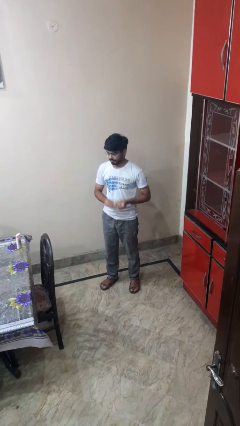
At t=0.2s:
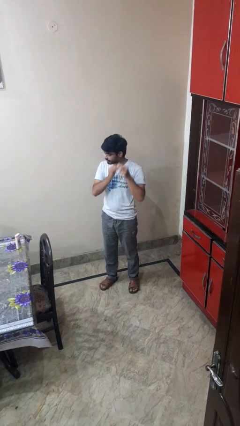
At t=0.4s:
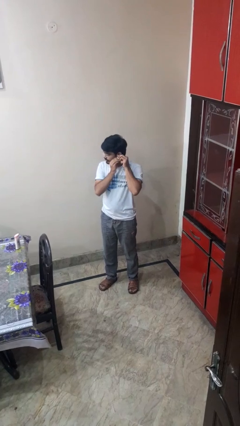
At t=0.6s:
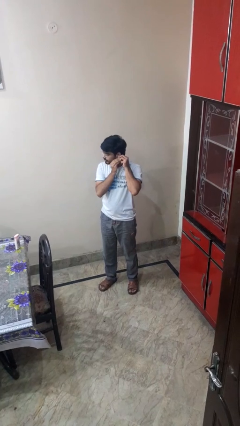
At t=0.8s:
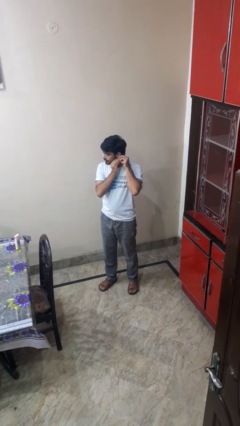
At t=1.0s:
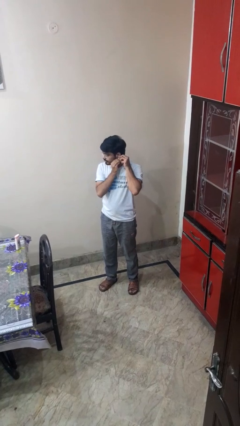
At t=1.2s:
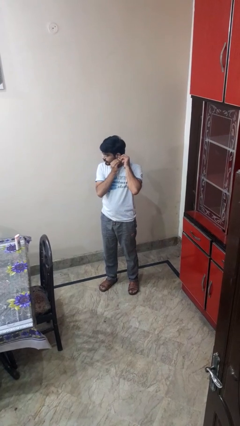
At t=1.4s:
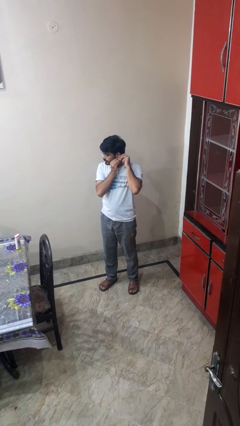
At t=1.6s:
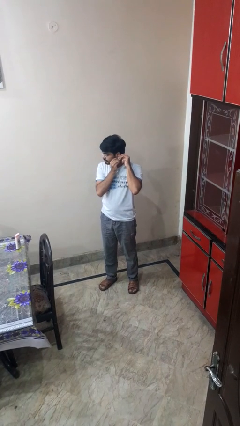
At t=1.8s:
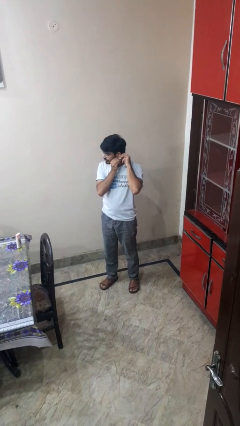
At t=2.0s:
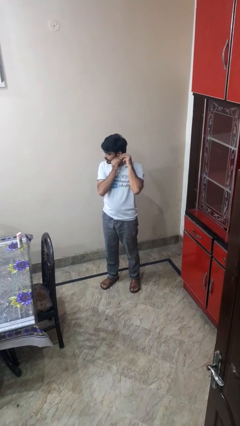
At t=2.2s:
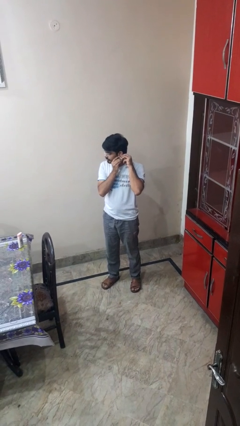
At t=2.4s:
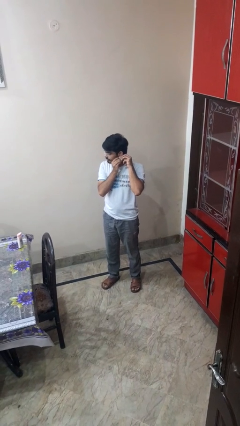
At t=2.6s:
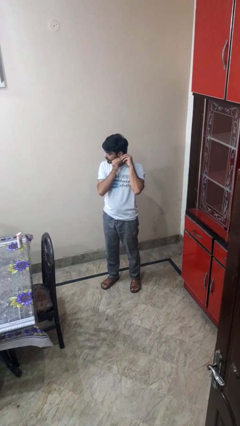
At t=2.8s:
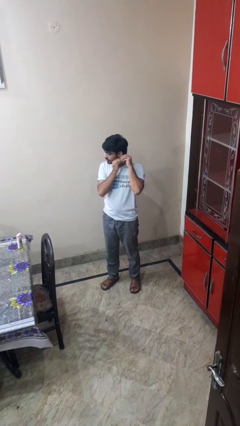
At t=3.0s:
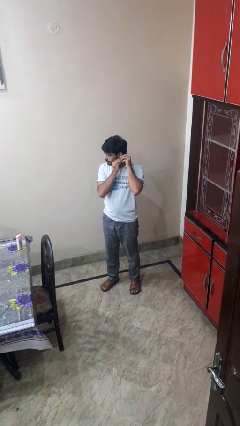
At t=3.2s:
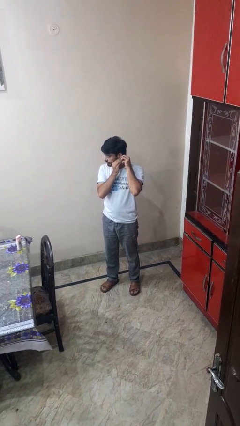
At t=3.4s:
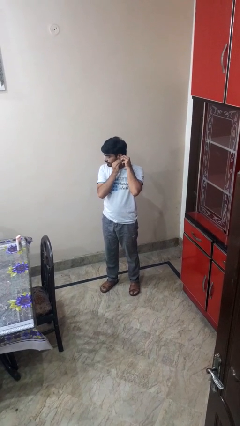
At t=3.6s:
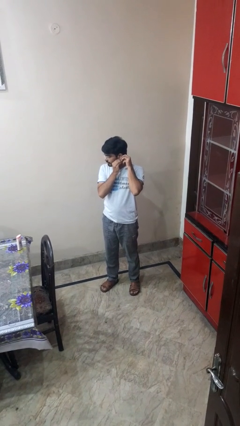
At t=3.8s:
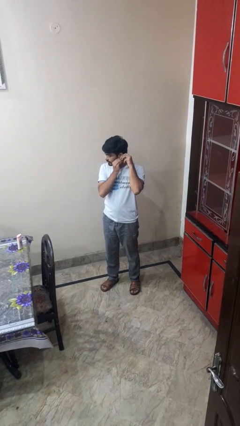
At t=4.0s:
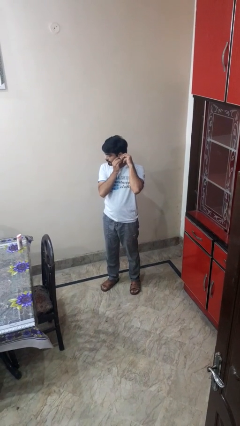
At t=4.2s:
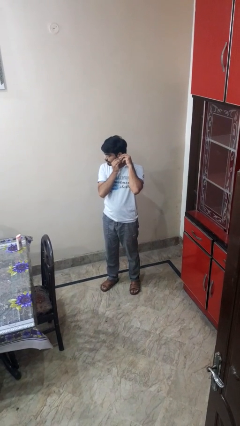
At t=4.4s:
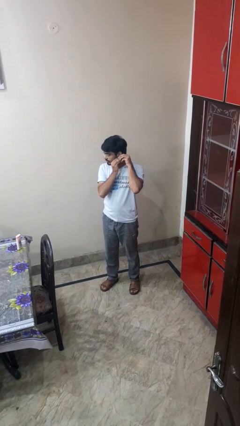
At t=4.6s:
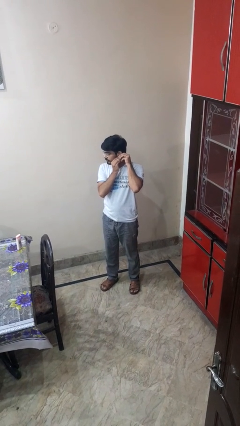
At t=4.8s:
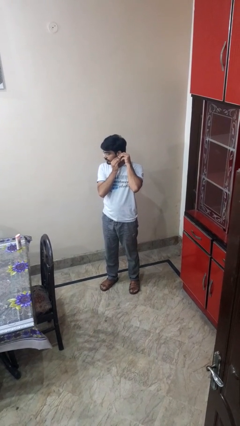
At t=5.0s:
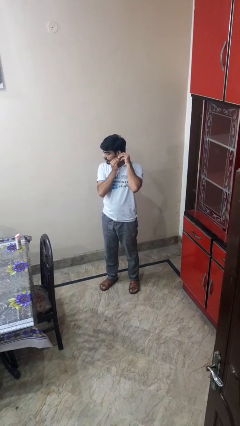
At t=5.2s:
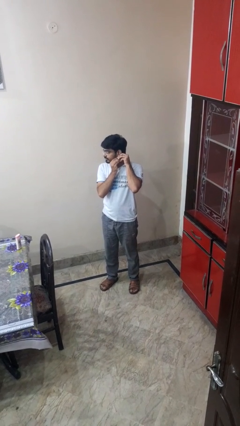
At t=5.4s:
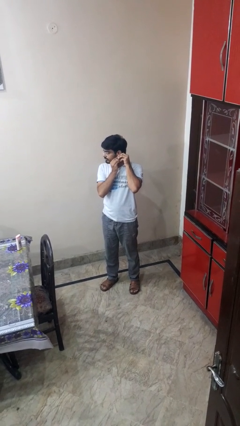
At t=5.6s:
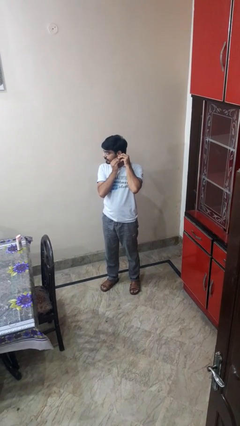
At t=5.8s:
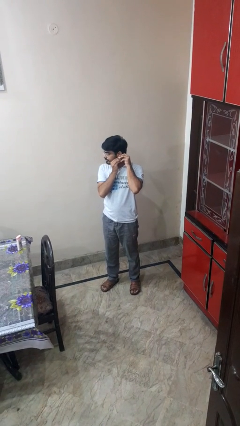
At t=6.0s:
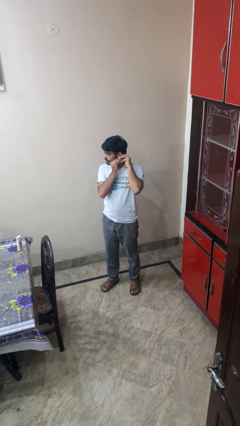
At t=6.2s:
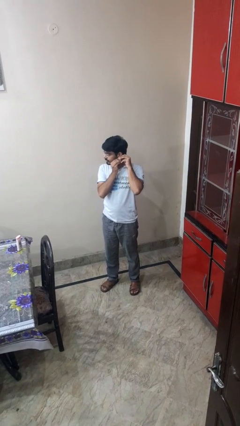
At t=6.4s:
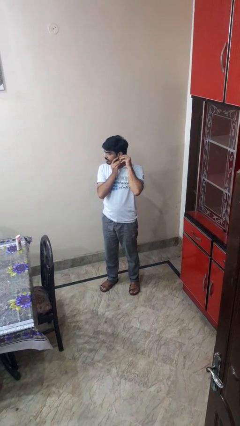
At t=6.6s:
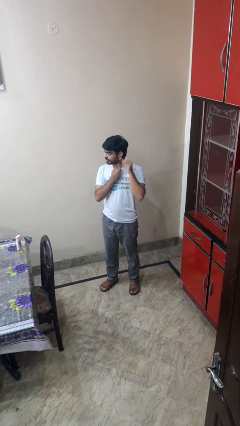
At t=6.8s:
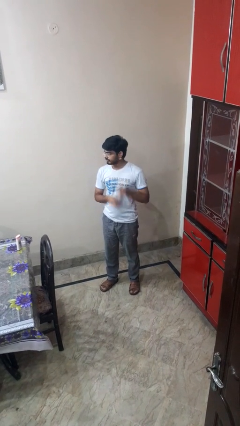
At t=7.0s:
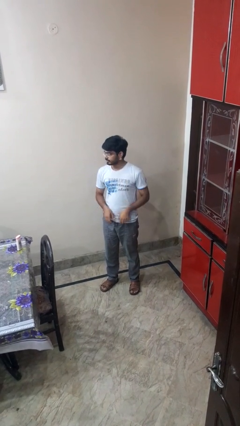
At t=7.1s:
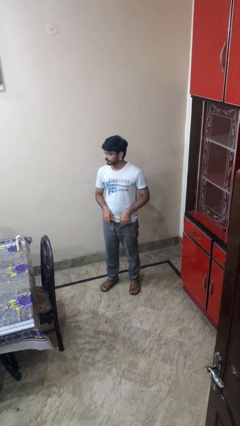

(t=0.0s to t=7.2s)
person puts on earrings

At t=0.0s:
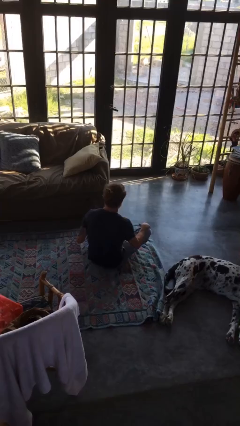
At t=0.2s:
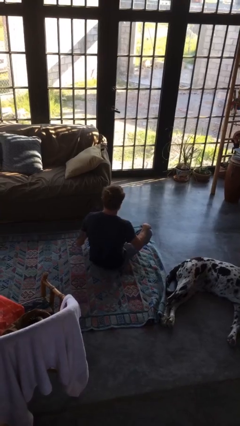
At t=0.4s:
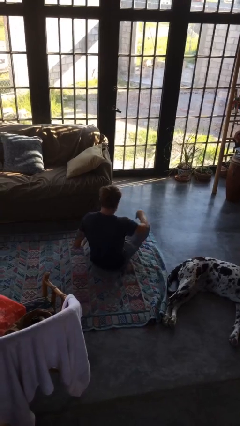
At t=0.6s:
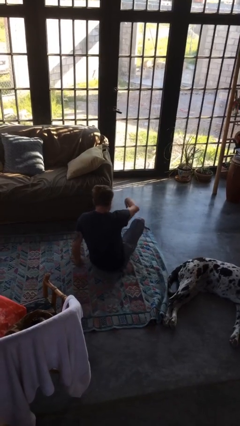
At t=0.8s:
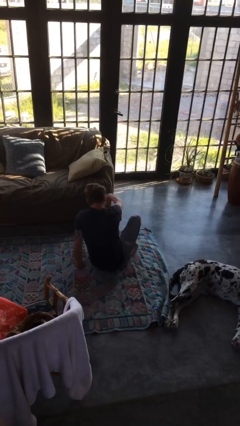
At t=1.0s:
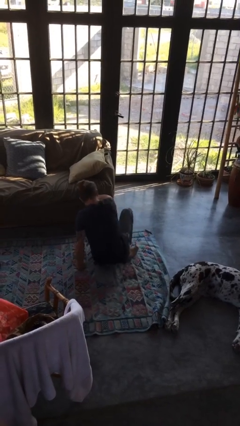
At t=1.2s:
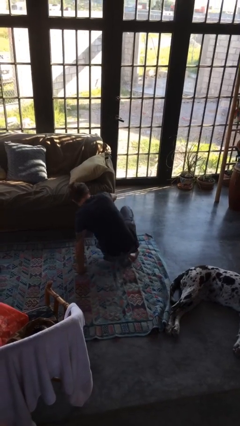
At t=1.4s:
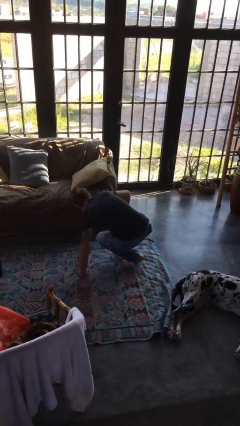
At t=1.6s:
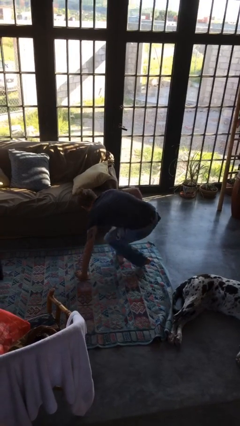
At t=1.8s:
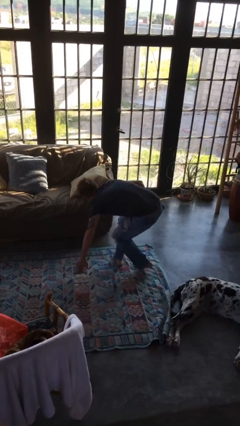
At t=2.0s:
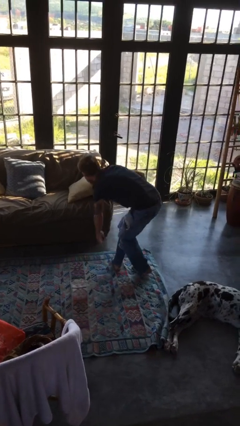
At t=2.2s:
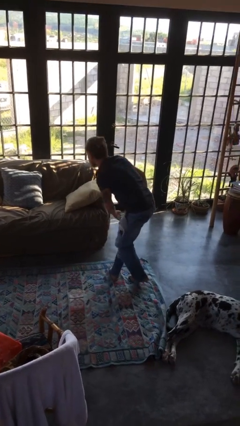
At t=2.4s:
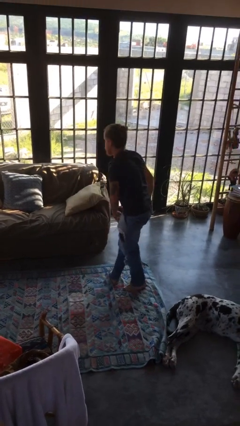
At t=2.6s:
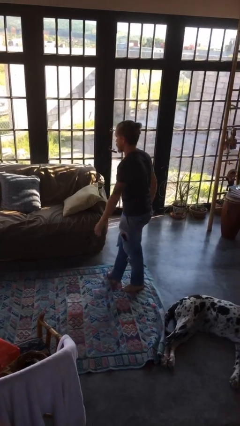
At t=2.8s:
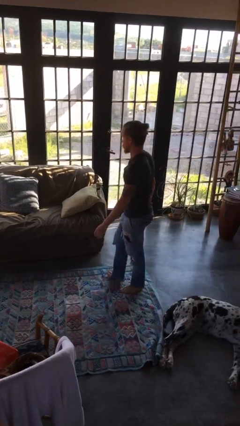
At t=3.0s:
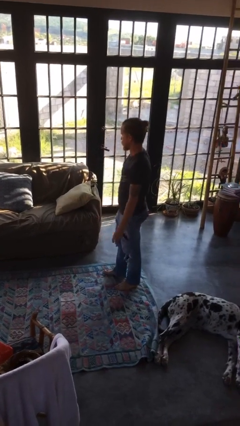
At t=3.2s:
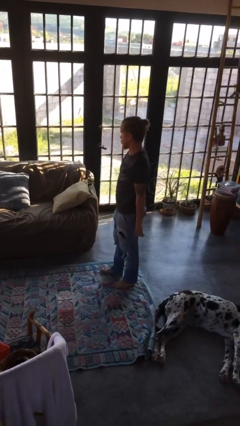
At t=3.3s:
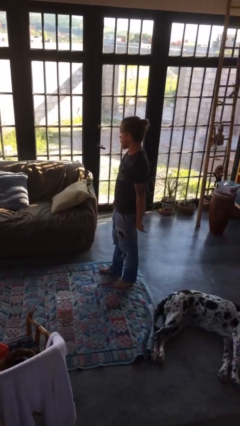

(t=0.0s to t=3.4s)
person stands up from floor

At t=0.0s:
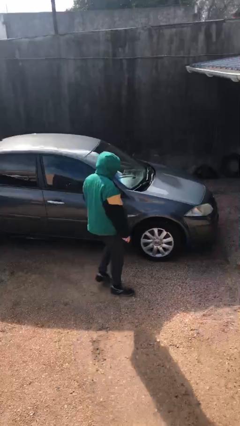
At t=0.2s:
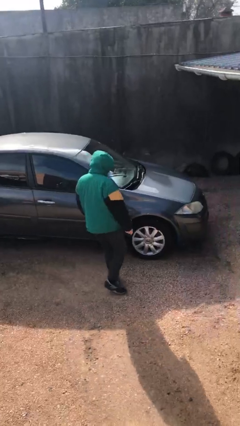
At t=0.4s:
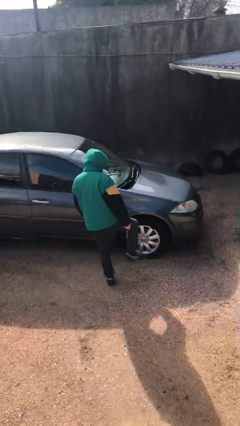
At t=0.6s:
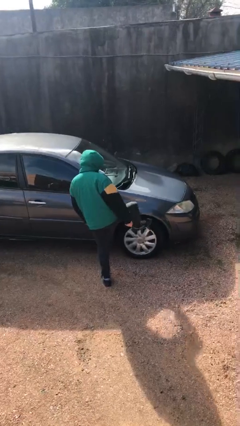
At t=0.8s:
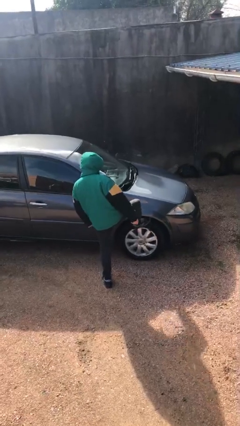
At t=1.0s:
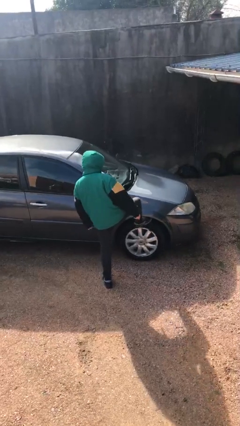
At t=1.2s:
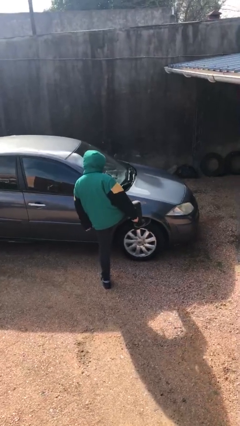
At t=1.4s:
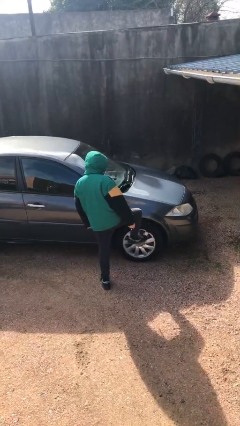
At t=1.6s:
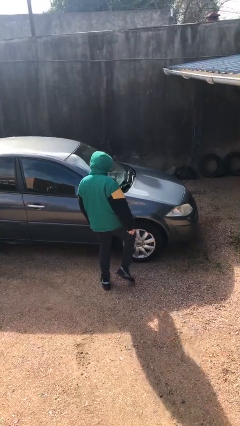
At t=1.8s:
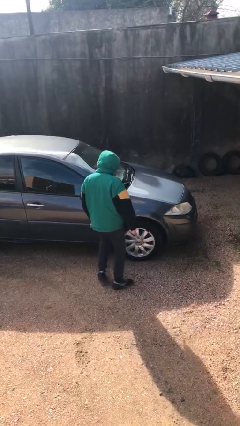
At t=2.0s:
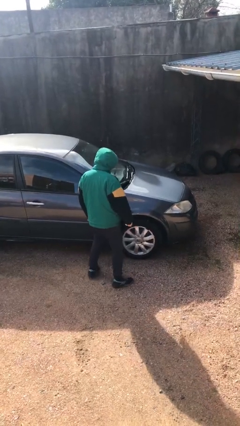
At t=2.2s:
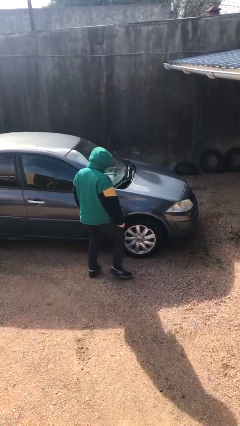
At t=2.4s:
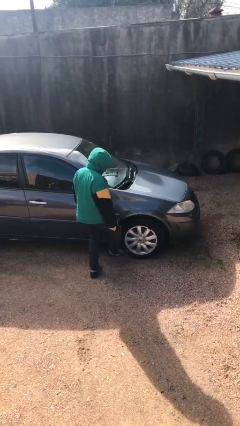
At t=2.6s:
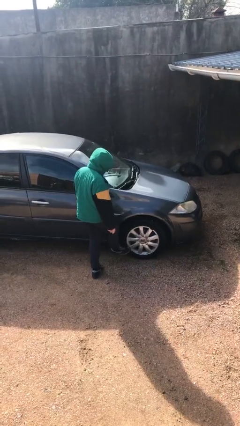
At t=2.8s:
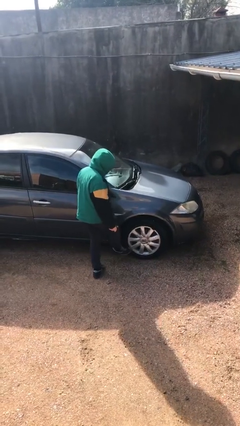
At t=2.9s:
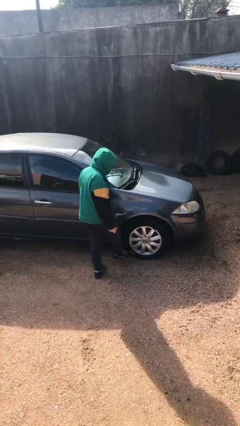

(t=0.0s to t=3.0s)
person kicks car tires

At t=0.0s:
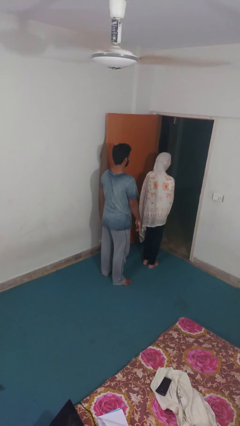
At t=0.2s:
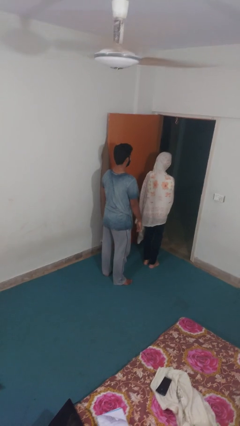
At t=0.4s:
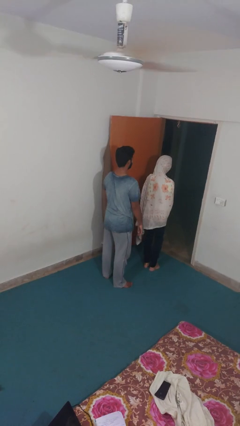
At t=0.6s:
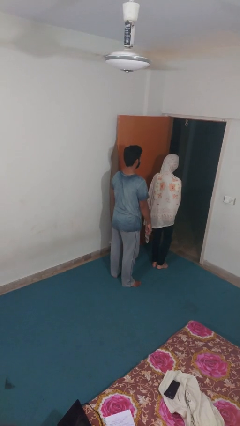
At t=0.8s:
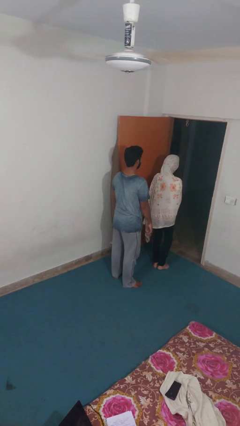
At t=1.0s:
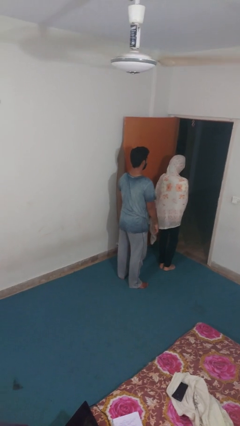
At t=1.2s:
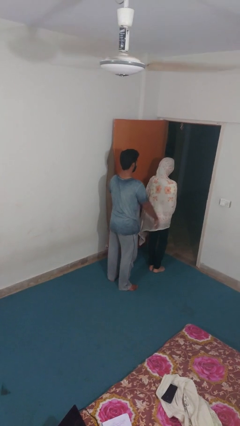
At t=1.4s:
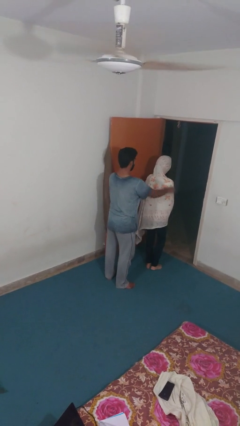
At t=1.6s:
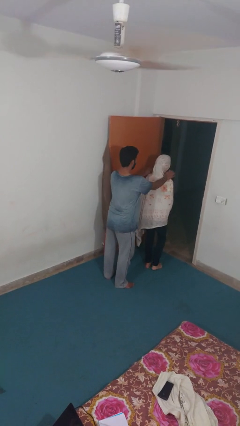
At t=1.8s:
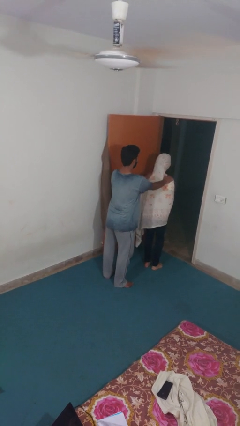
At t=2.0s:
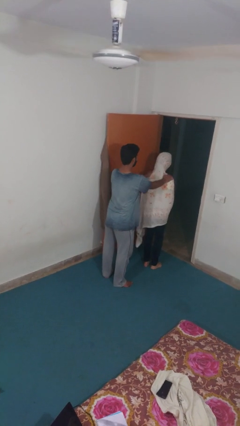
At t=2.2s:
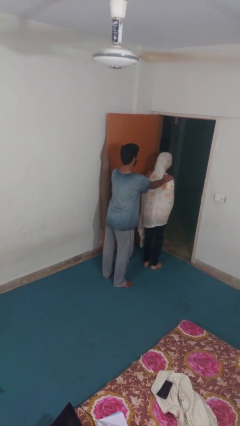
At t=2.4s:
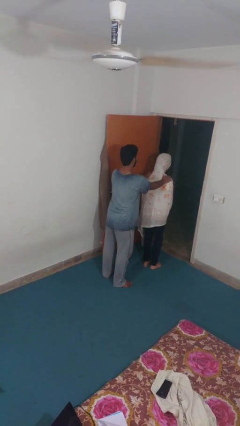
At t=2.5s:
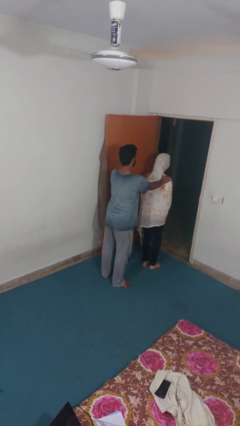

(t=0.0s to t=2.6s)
person grabs person by shoulder

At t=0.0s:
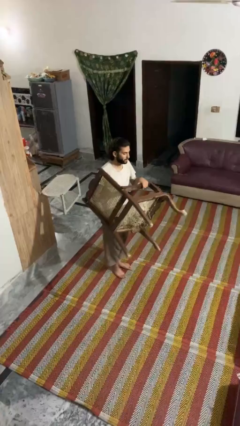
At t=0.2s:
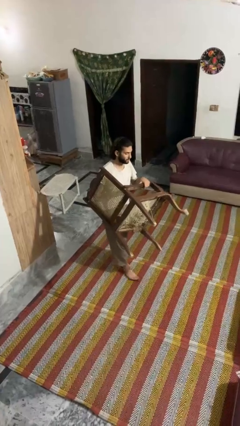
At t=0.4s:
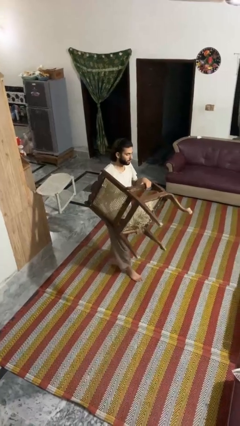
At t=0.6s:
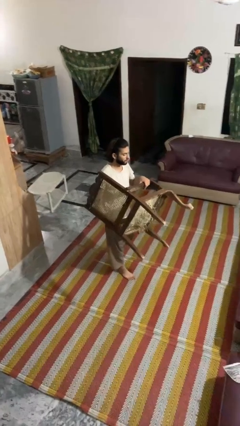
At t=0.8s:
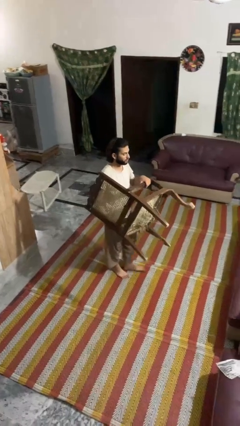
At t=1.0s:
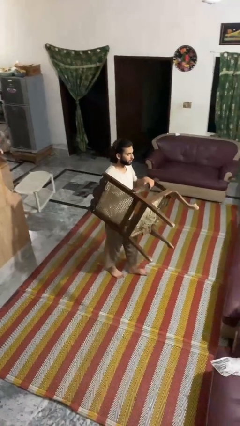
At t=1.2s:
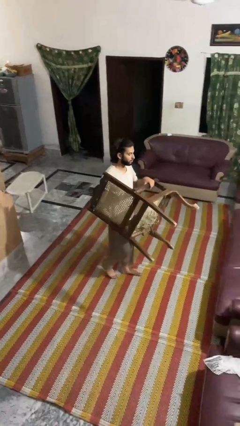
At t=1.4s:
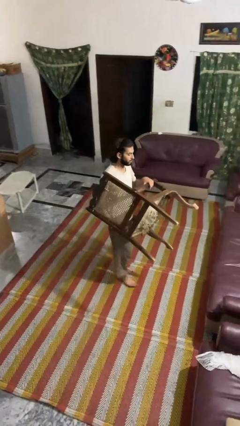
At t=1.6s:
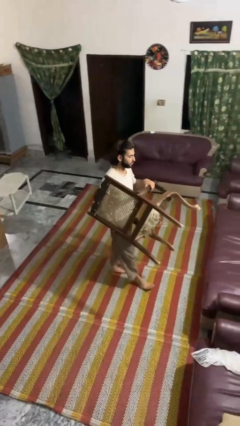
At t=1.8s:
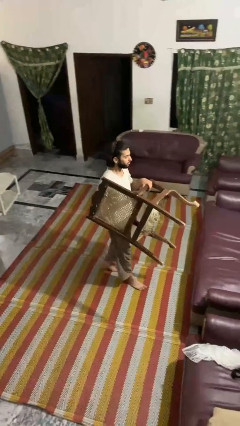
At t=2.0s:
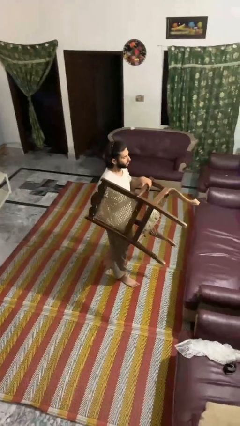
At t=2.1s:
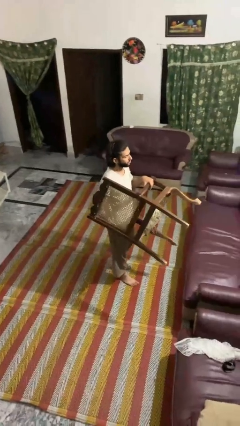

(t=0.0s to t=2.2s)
person carries furniture
